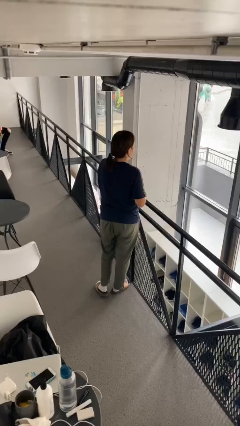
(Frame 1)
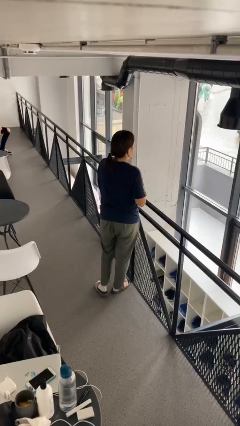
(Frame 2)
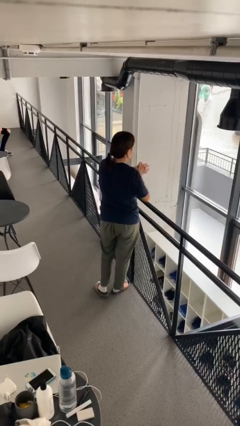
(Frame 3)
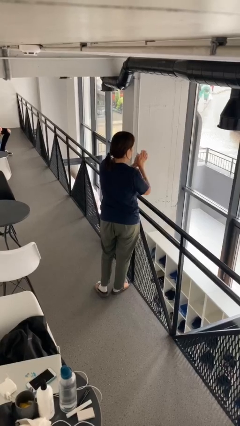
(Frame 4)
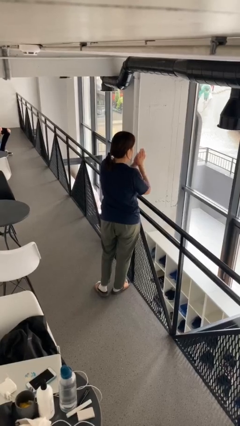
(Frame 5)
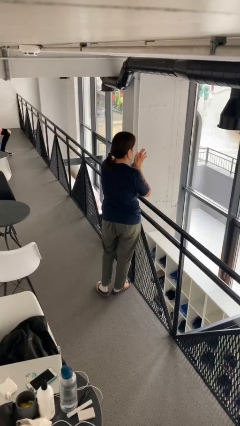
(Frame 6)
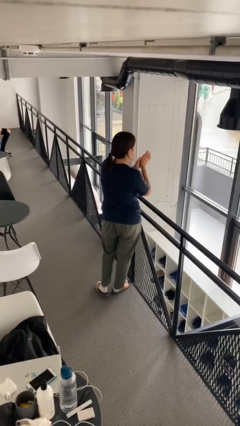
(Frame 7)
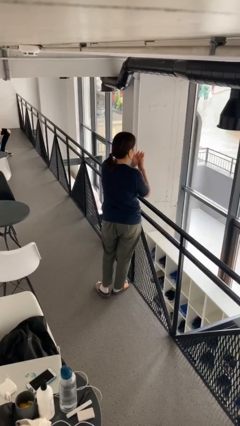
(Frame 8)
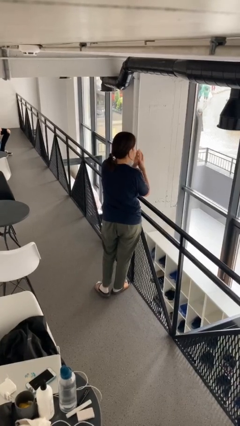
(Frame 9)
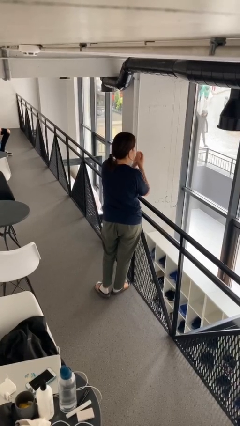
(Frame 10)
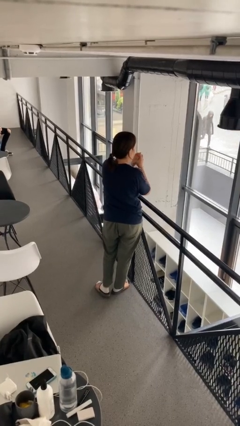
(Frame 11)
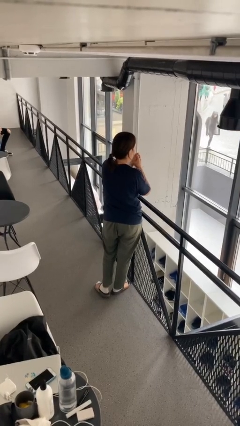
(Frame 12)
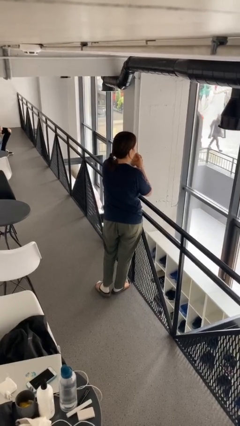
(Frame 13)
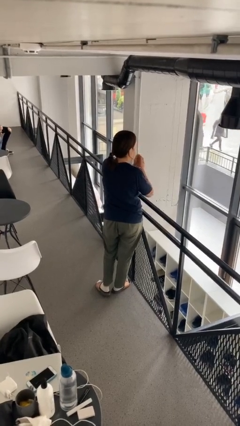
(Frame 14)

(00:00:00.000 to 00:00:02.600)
person blows into hands

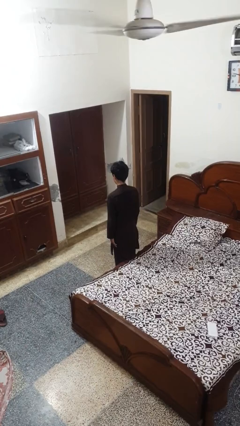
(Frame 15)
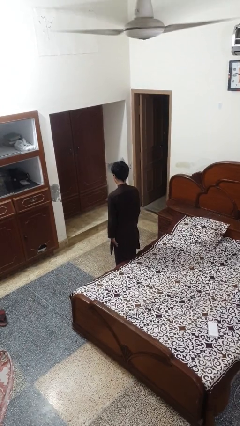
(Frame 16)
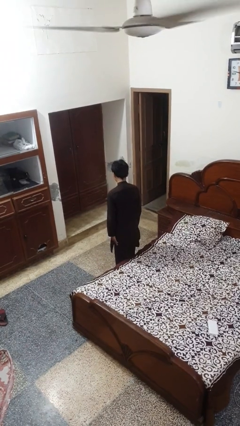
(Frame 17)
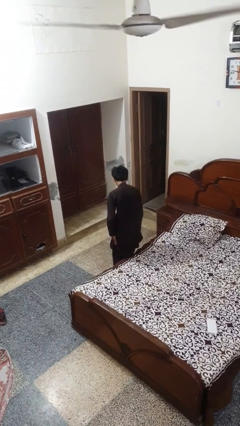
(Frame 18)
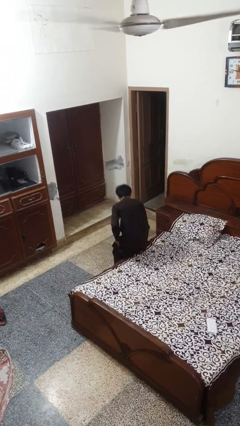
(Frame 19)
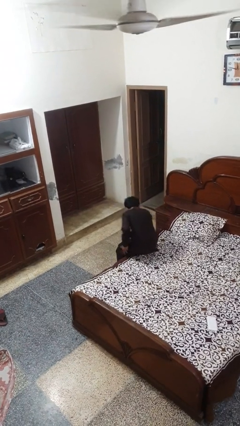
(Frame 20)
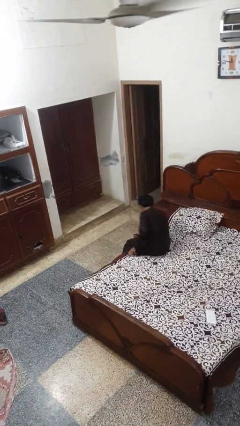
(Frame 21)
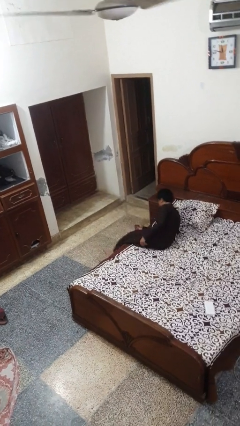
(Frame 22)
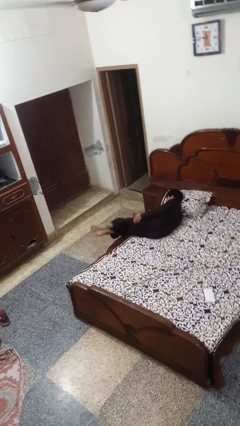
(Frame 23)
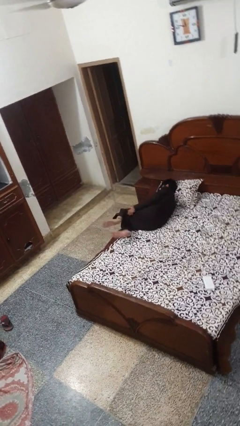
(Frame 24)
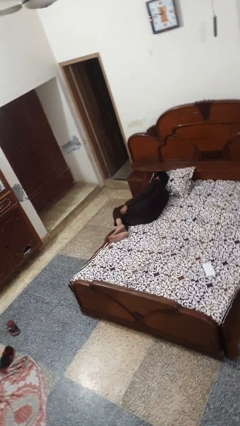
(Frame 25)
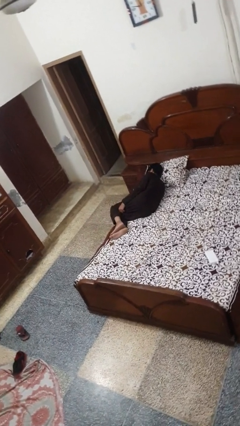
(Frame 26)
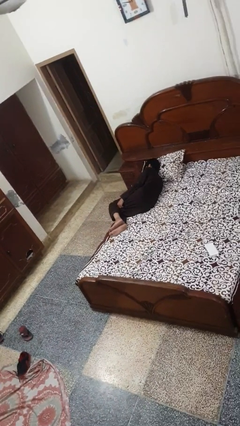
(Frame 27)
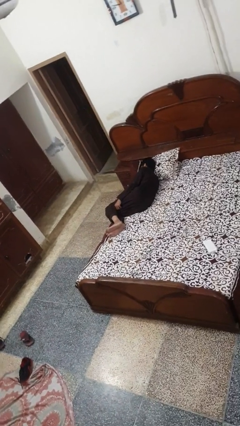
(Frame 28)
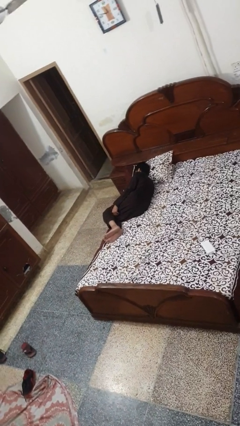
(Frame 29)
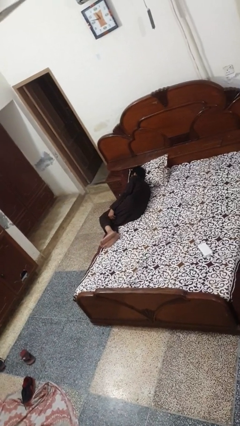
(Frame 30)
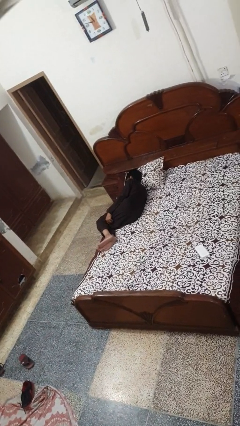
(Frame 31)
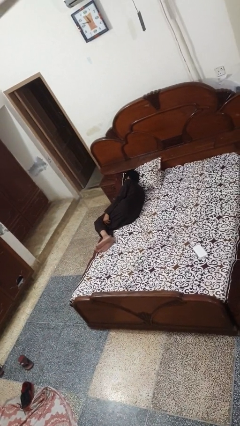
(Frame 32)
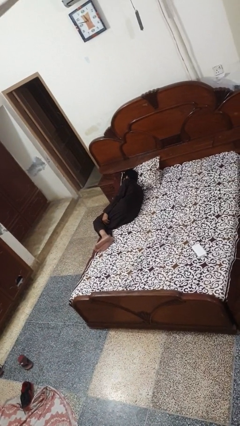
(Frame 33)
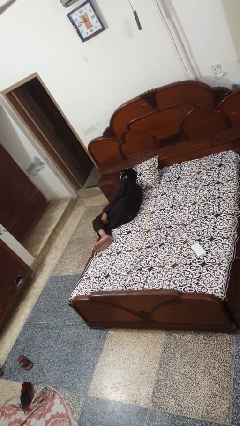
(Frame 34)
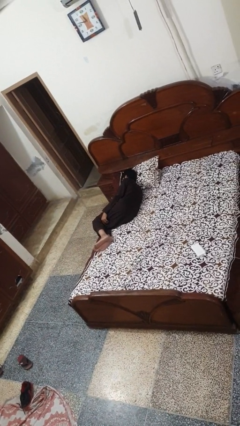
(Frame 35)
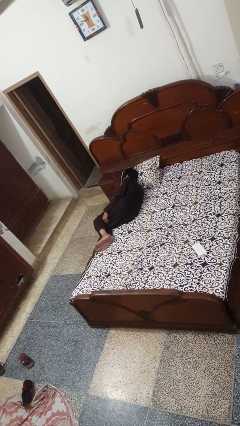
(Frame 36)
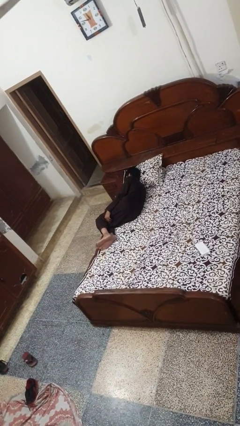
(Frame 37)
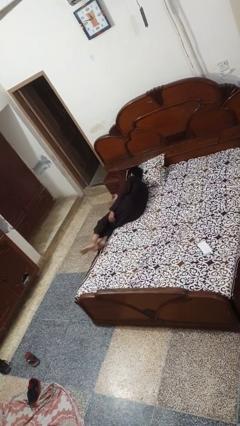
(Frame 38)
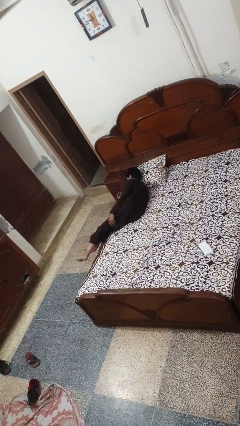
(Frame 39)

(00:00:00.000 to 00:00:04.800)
person lies down on bed

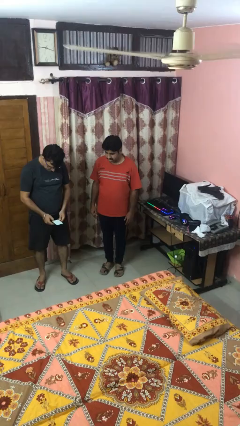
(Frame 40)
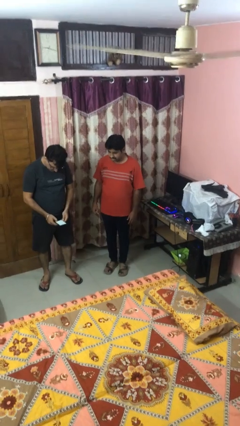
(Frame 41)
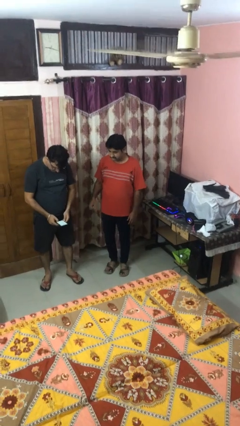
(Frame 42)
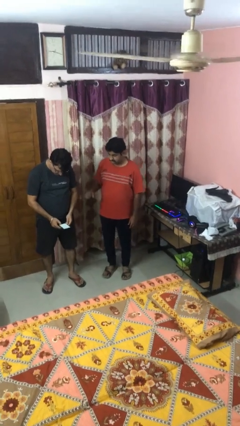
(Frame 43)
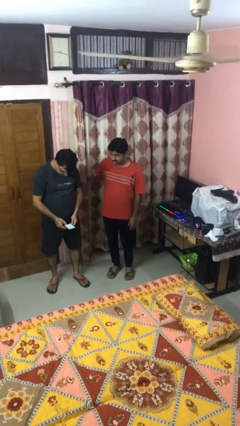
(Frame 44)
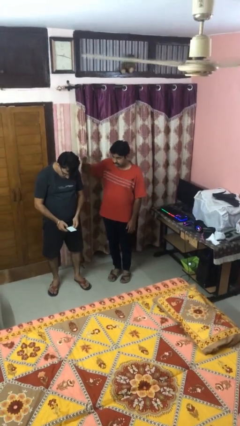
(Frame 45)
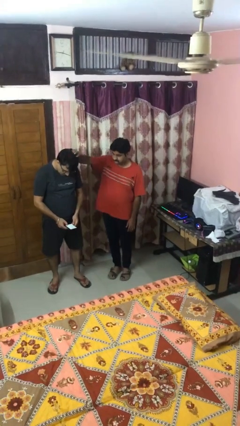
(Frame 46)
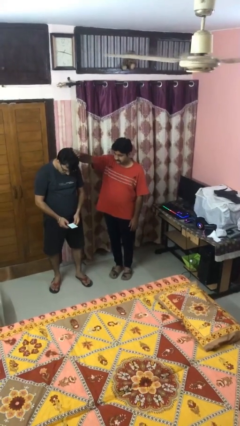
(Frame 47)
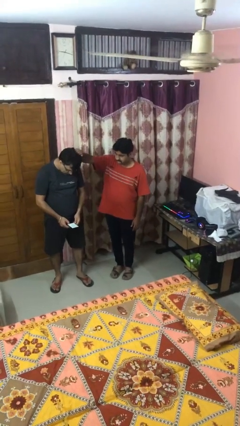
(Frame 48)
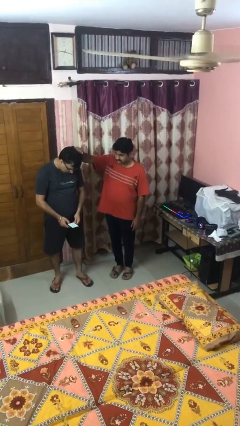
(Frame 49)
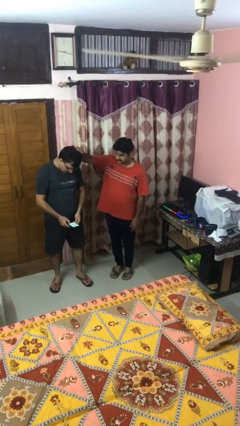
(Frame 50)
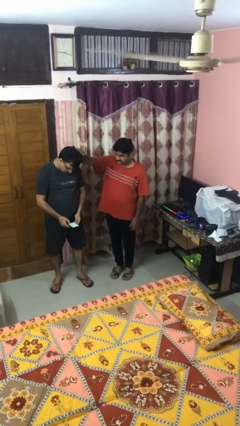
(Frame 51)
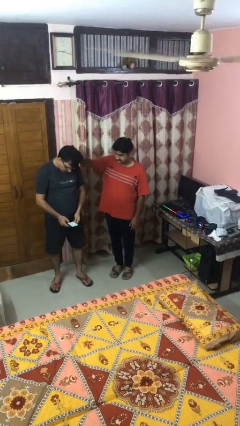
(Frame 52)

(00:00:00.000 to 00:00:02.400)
person grabs person by hair

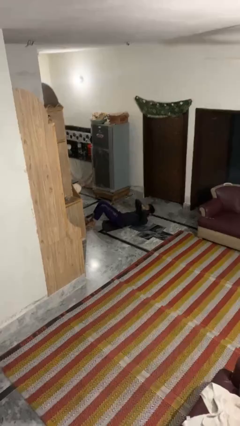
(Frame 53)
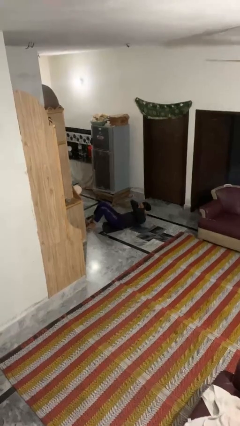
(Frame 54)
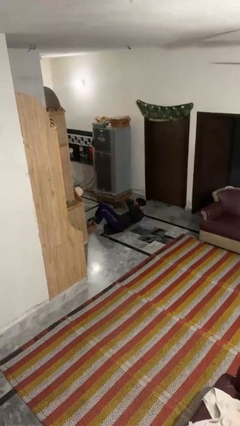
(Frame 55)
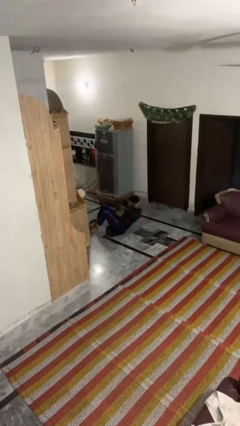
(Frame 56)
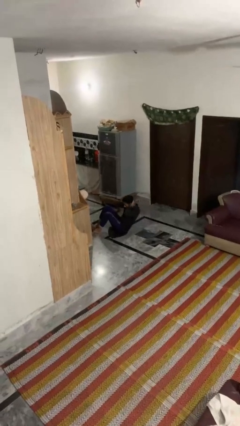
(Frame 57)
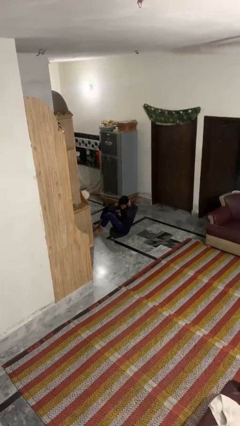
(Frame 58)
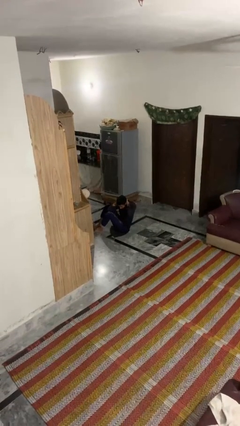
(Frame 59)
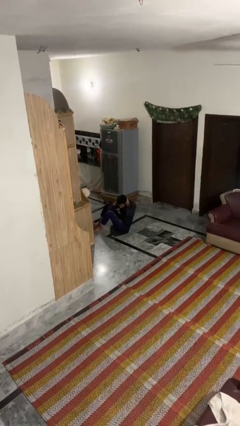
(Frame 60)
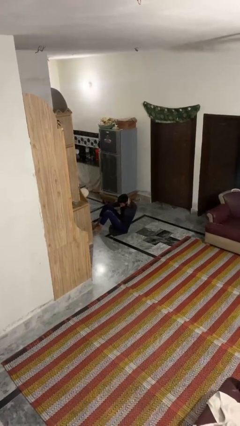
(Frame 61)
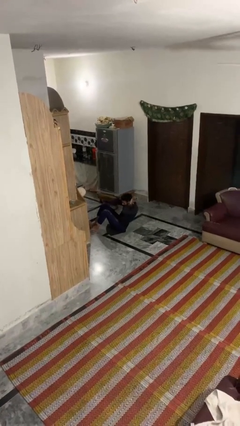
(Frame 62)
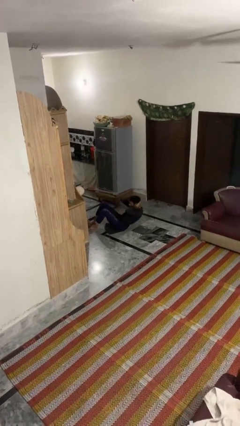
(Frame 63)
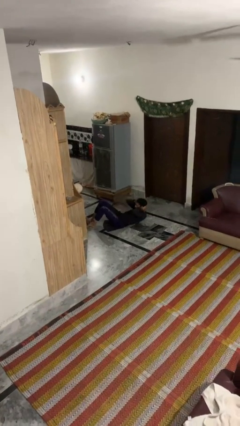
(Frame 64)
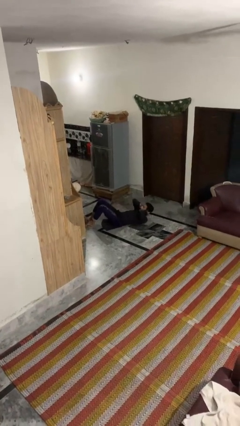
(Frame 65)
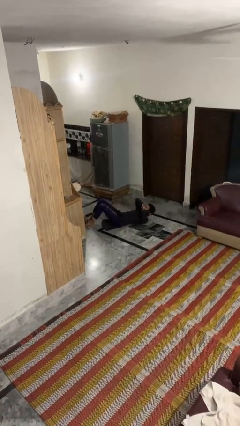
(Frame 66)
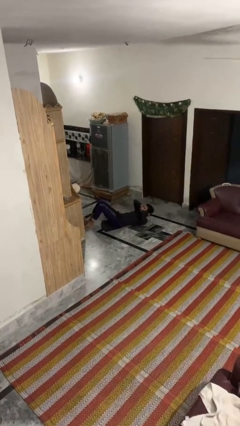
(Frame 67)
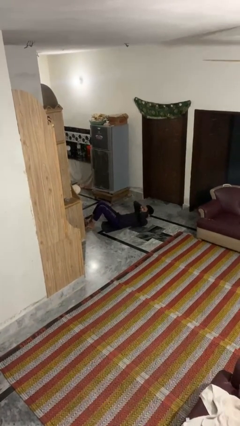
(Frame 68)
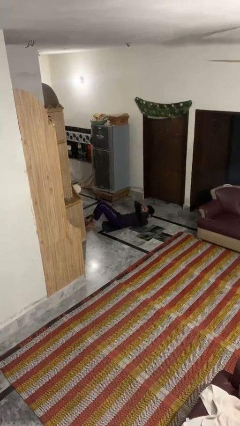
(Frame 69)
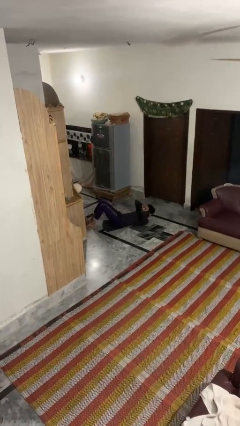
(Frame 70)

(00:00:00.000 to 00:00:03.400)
person exercises with situp

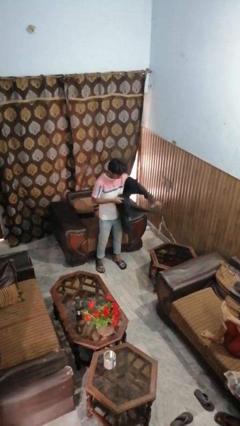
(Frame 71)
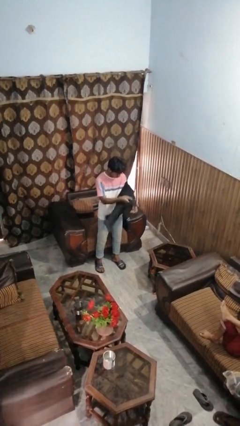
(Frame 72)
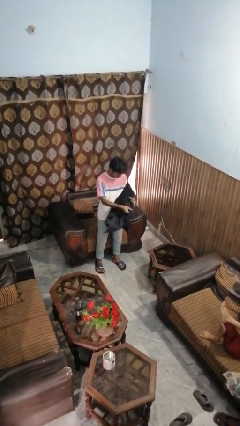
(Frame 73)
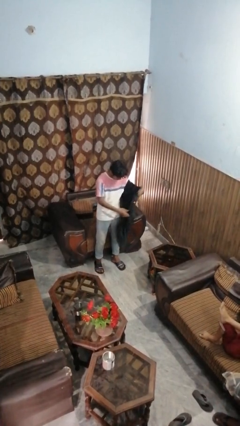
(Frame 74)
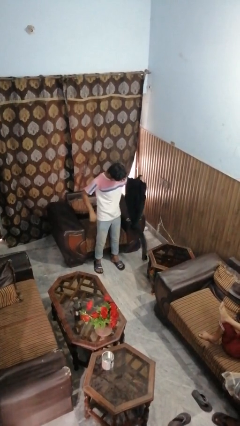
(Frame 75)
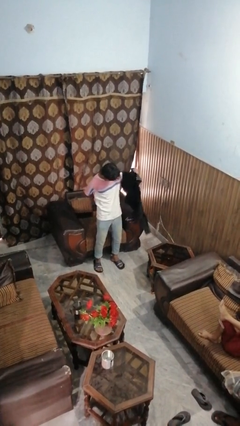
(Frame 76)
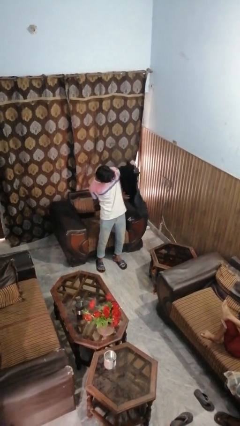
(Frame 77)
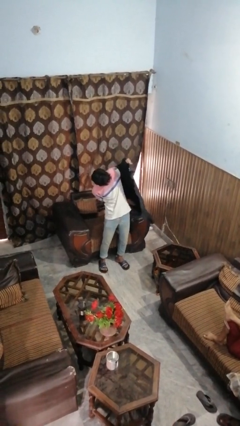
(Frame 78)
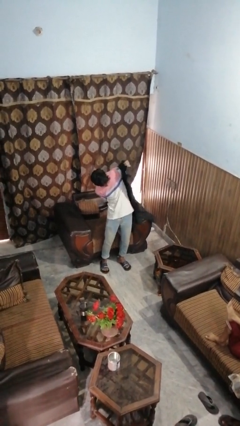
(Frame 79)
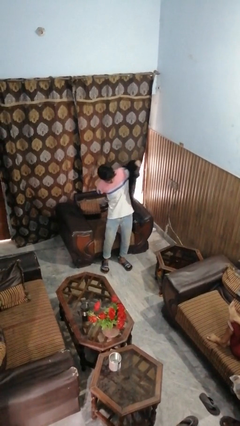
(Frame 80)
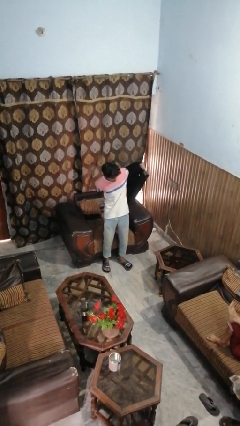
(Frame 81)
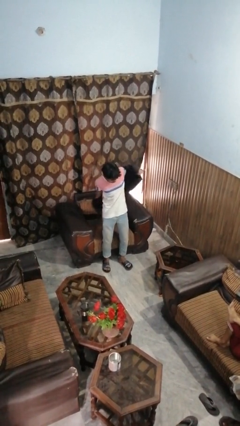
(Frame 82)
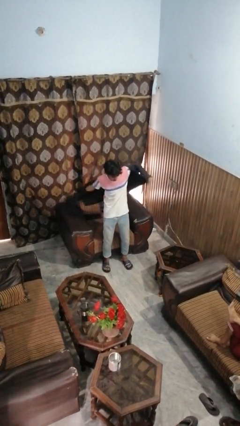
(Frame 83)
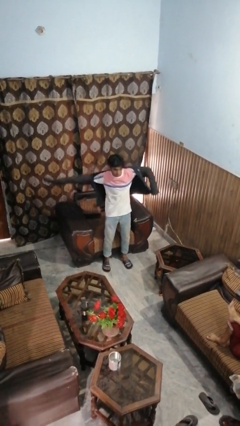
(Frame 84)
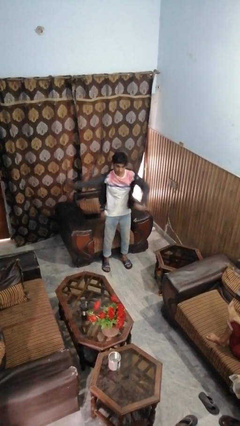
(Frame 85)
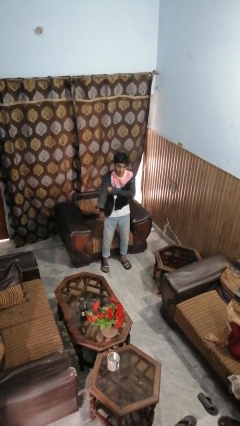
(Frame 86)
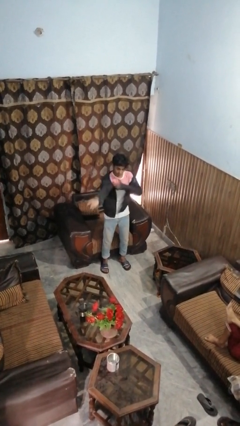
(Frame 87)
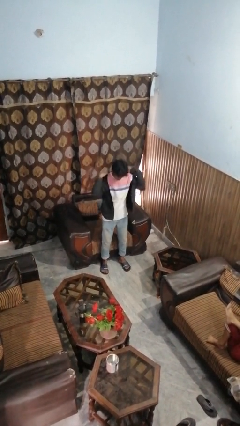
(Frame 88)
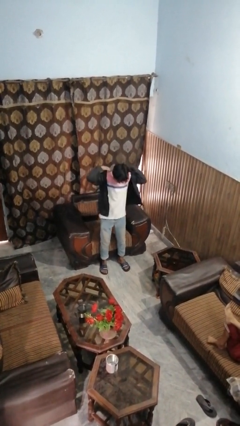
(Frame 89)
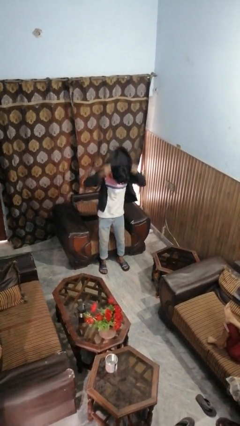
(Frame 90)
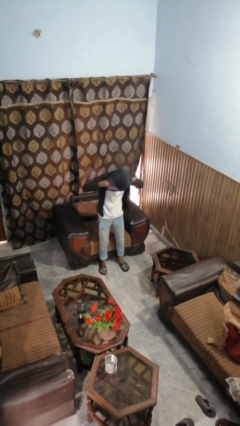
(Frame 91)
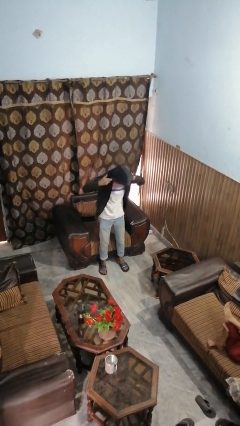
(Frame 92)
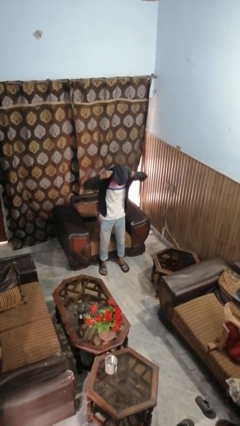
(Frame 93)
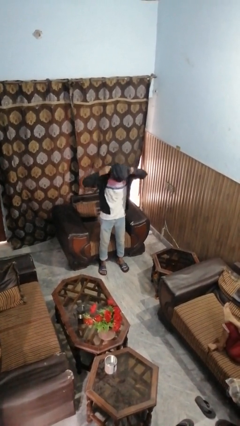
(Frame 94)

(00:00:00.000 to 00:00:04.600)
person puts on hoodie

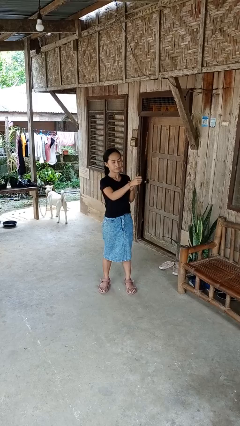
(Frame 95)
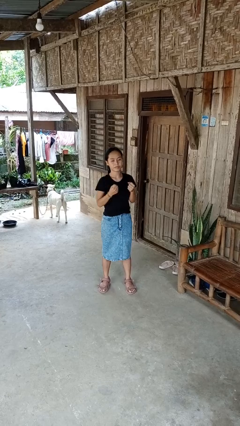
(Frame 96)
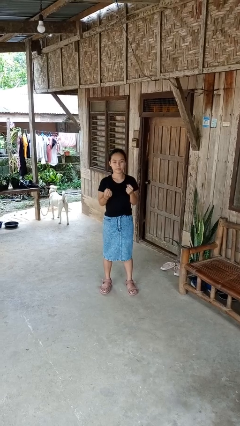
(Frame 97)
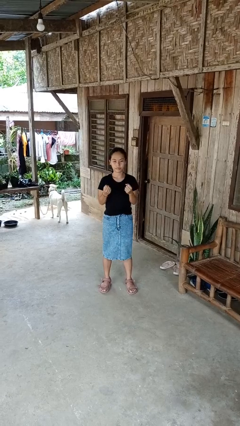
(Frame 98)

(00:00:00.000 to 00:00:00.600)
person punches
